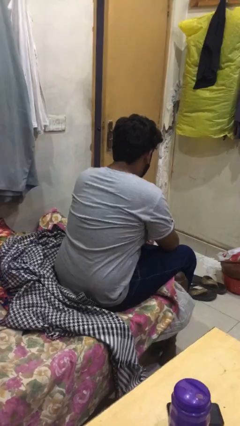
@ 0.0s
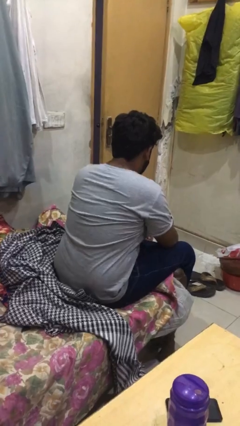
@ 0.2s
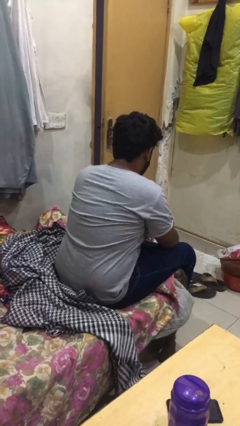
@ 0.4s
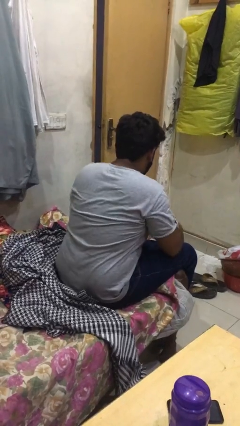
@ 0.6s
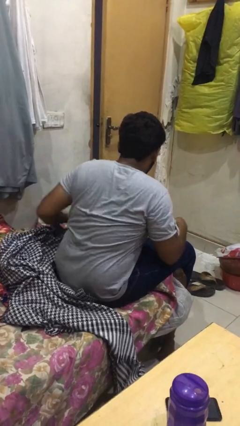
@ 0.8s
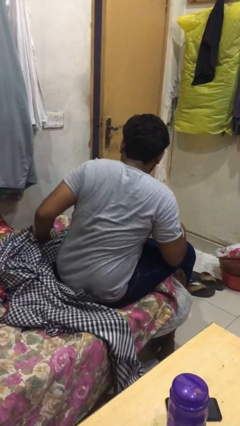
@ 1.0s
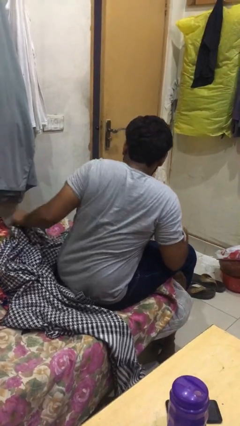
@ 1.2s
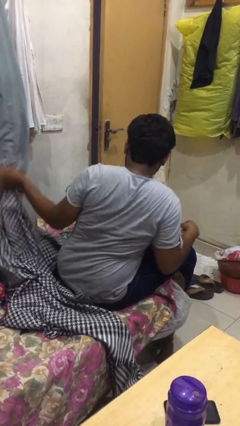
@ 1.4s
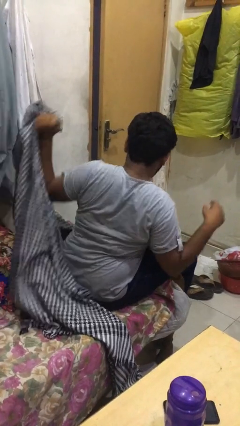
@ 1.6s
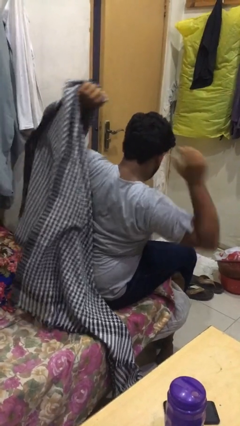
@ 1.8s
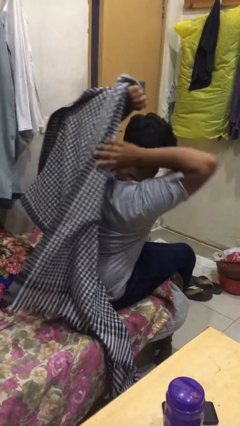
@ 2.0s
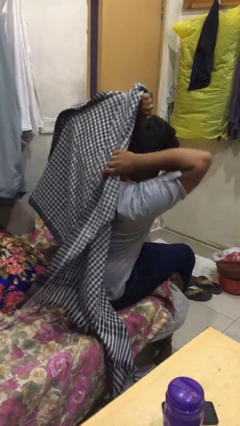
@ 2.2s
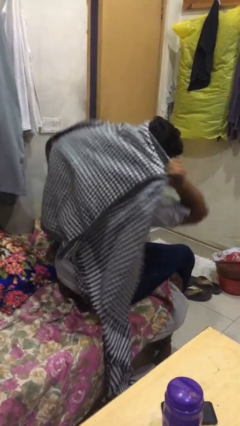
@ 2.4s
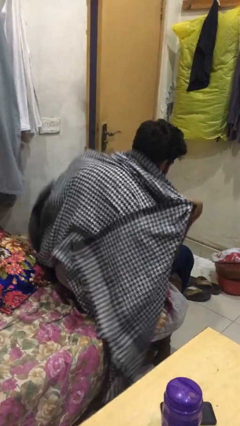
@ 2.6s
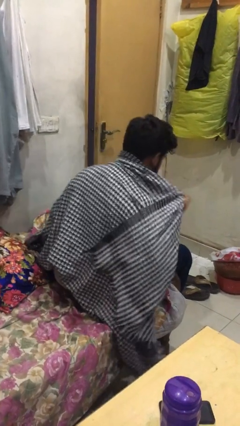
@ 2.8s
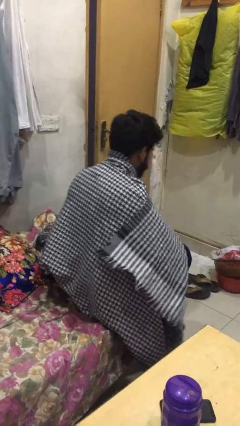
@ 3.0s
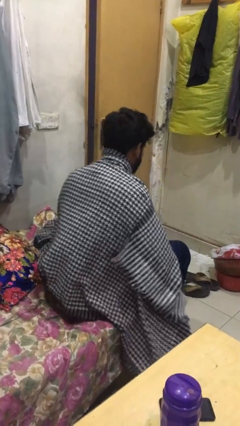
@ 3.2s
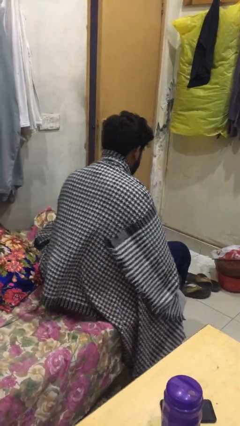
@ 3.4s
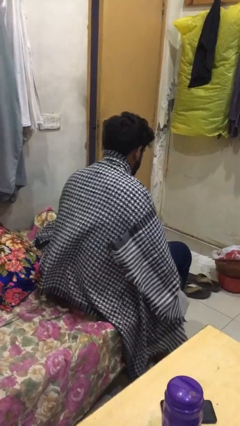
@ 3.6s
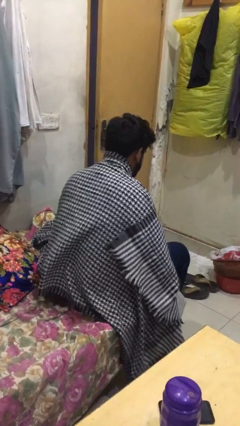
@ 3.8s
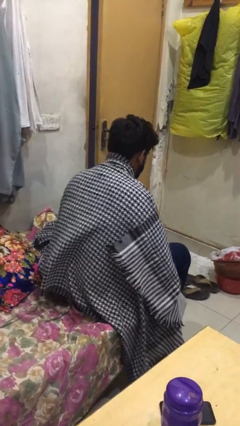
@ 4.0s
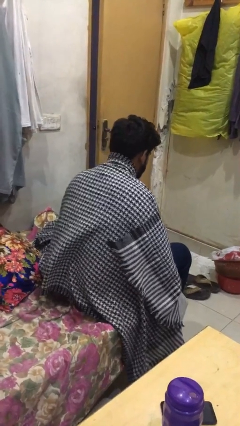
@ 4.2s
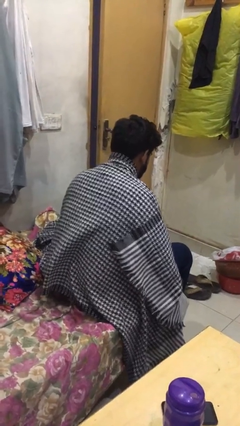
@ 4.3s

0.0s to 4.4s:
person covers with blanket

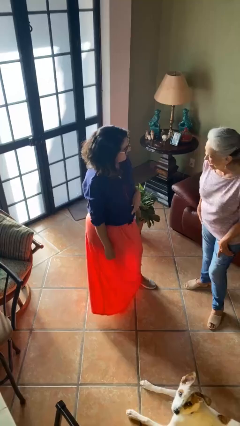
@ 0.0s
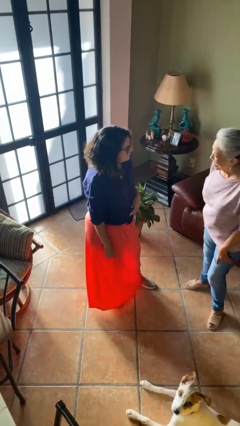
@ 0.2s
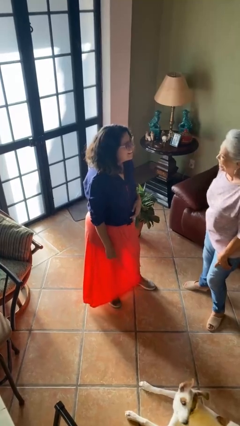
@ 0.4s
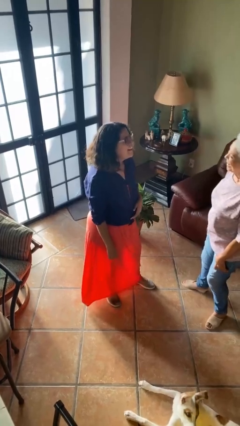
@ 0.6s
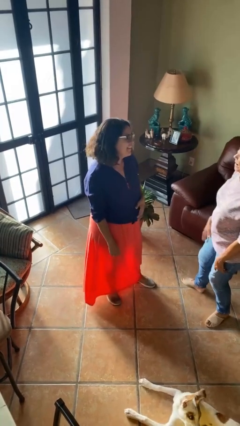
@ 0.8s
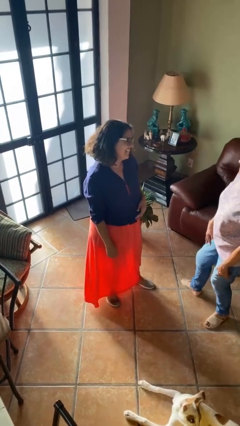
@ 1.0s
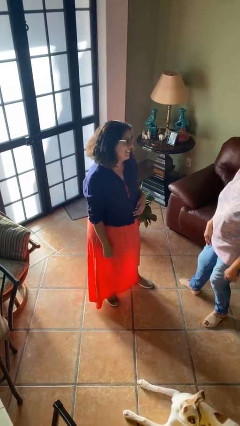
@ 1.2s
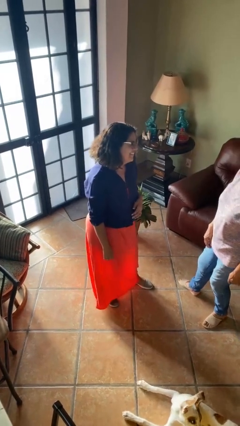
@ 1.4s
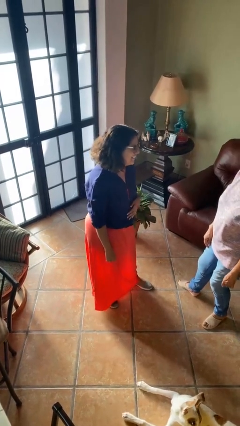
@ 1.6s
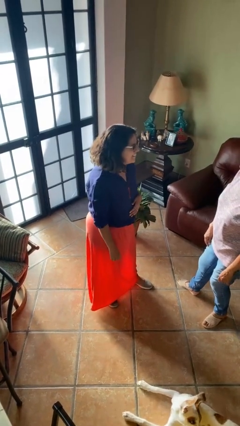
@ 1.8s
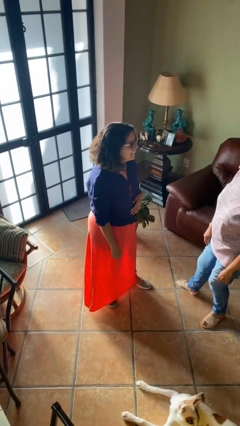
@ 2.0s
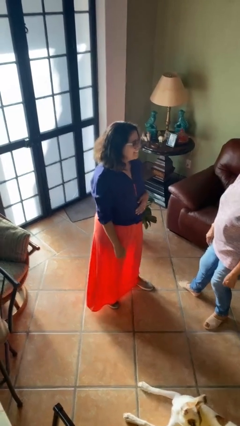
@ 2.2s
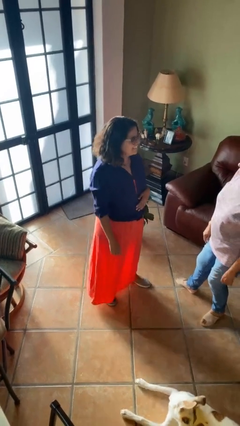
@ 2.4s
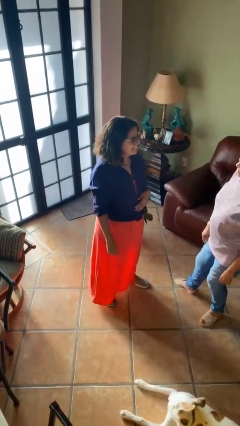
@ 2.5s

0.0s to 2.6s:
person laughs with person

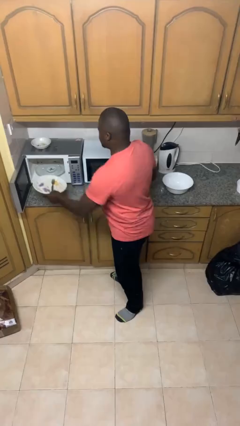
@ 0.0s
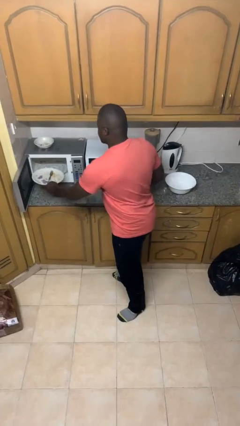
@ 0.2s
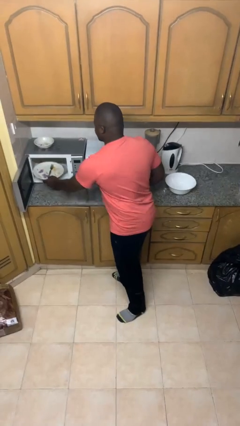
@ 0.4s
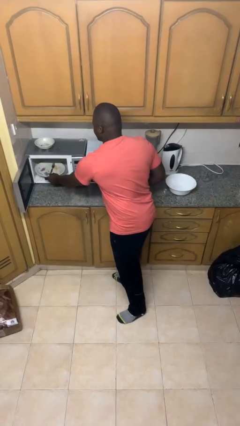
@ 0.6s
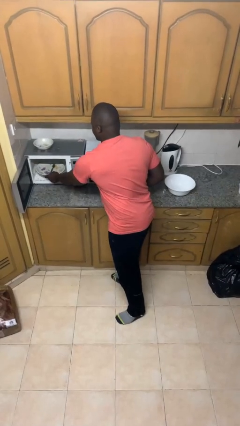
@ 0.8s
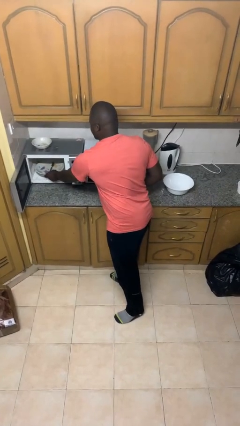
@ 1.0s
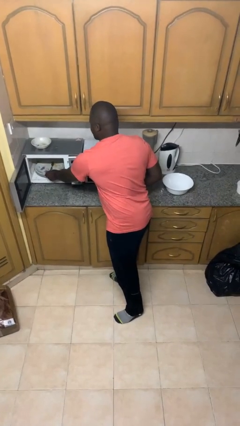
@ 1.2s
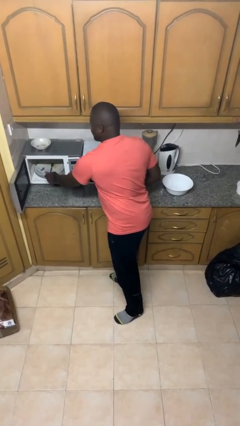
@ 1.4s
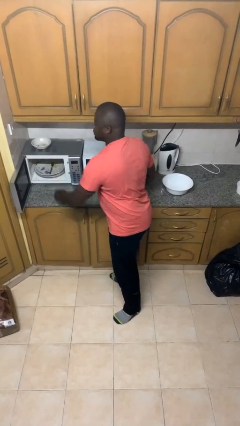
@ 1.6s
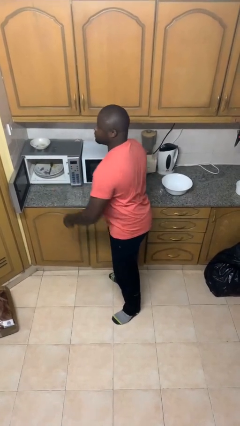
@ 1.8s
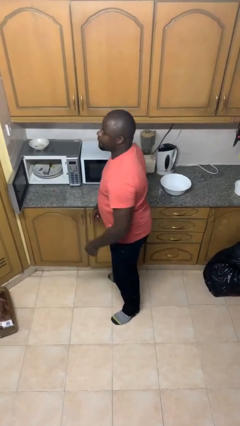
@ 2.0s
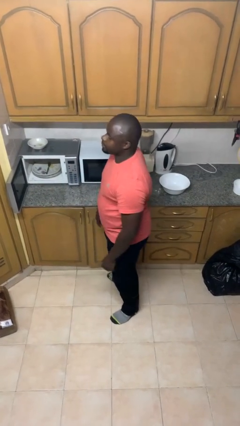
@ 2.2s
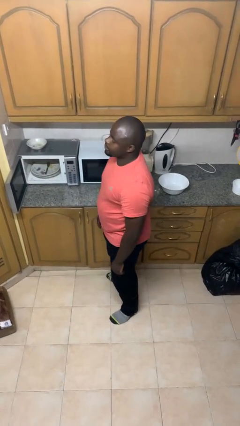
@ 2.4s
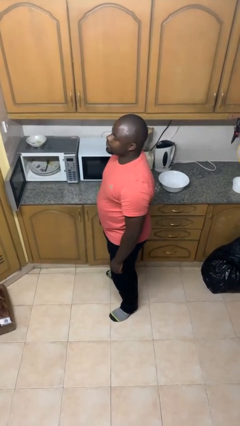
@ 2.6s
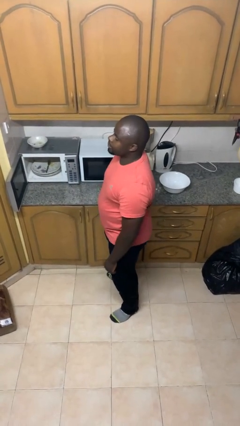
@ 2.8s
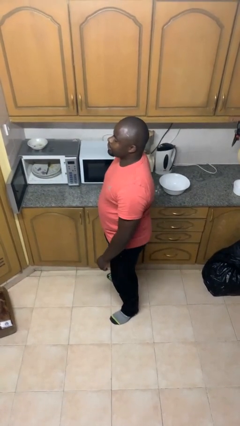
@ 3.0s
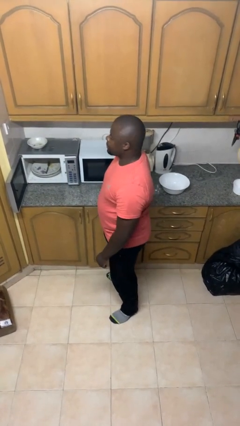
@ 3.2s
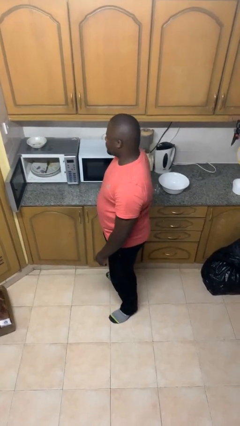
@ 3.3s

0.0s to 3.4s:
person puts object into microwave

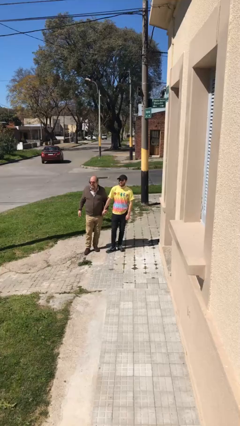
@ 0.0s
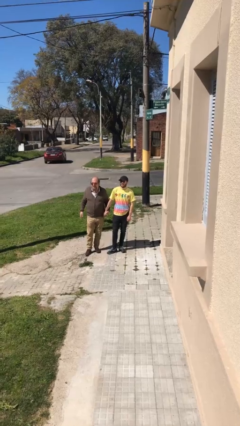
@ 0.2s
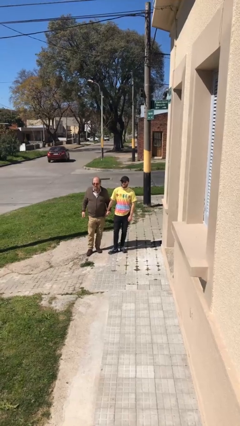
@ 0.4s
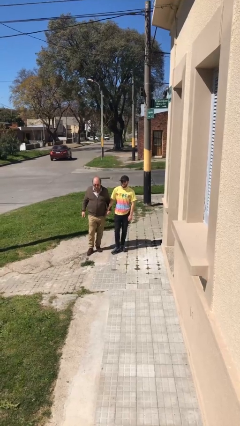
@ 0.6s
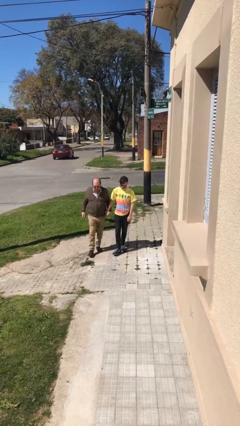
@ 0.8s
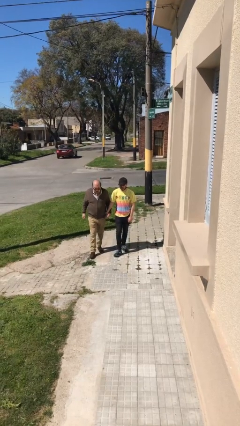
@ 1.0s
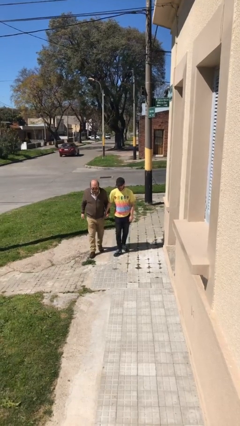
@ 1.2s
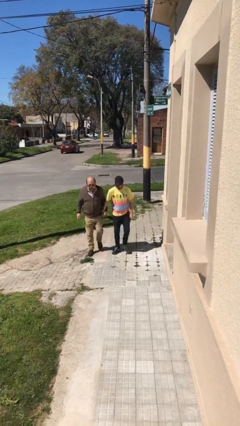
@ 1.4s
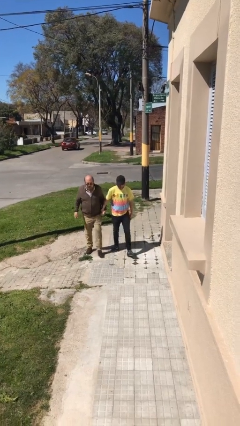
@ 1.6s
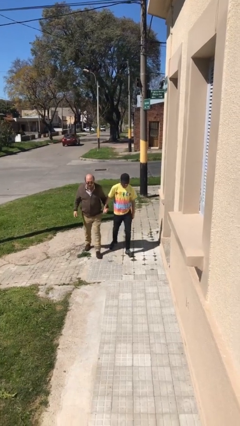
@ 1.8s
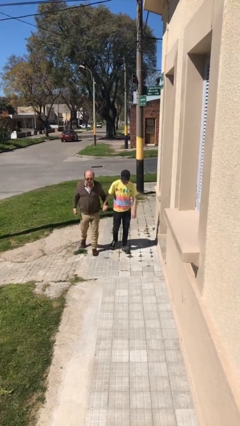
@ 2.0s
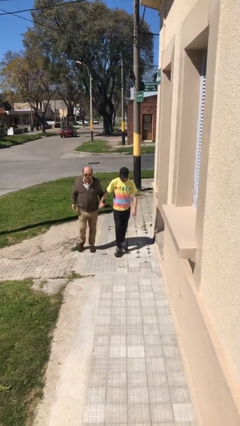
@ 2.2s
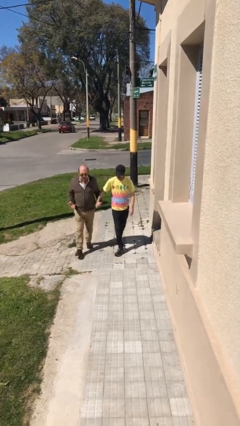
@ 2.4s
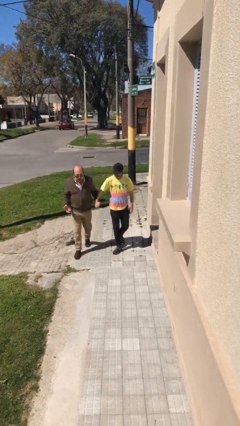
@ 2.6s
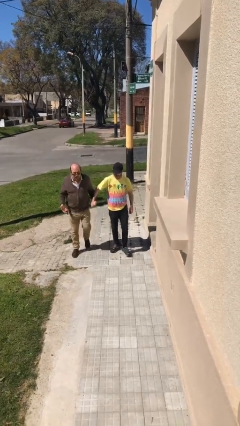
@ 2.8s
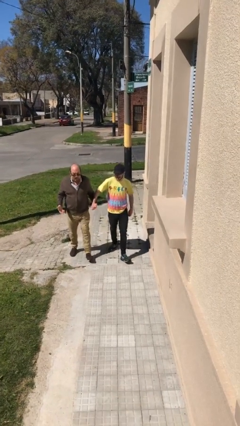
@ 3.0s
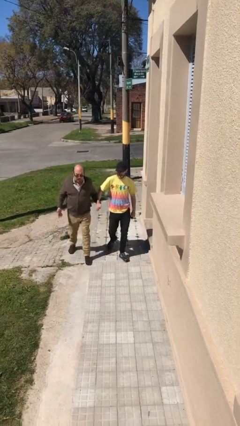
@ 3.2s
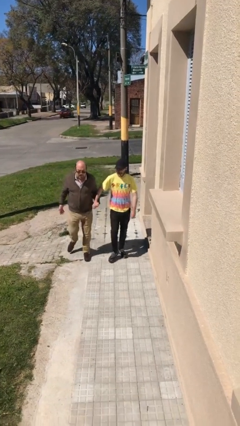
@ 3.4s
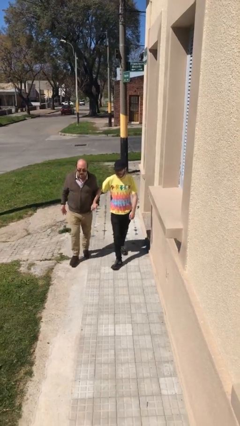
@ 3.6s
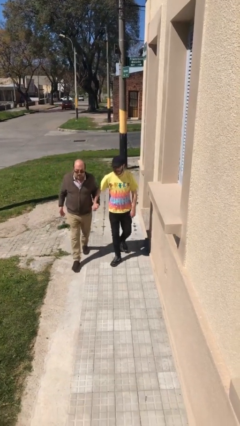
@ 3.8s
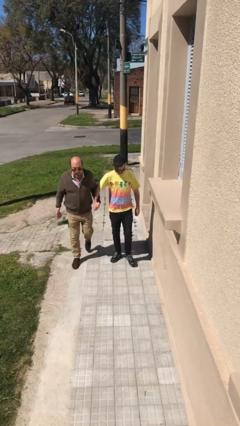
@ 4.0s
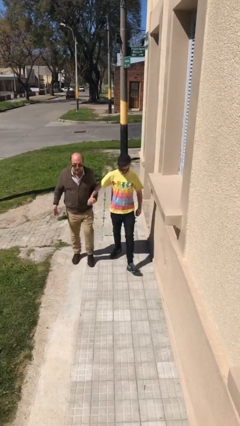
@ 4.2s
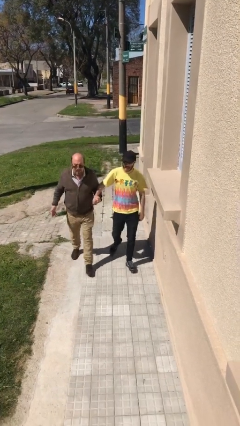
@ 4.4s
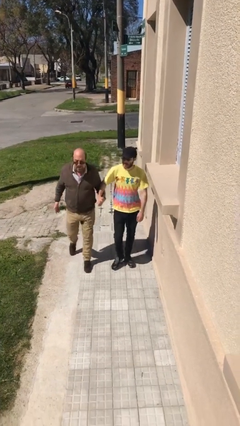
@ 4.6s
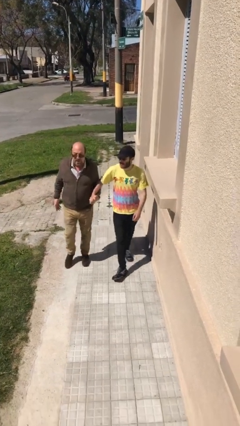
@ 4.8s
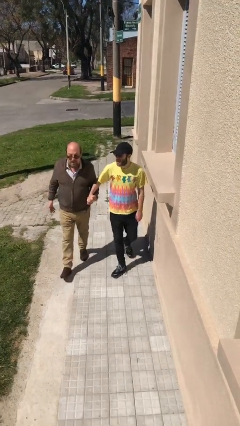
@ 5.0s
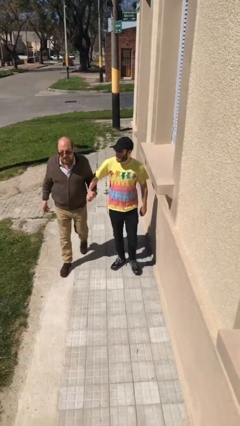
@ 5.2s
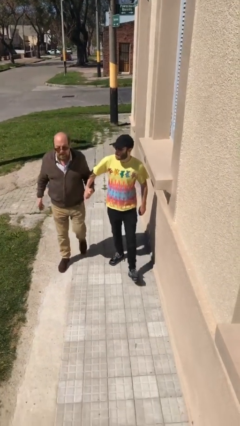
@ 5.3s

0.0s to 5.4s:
person holds hand

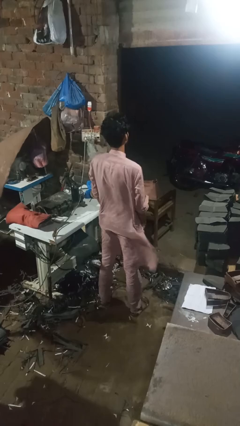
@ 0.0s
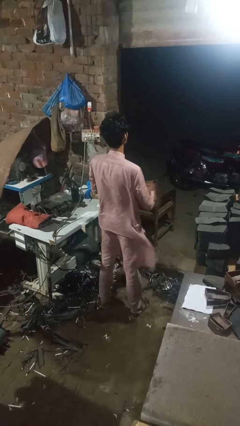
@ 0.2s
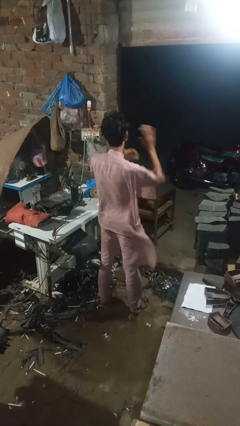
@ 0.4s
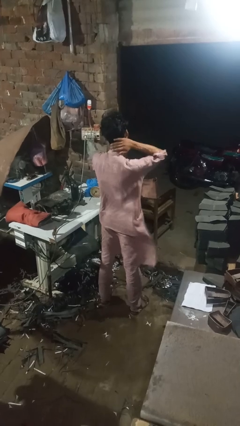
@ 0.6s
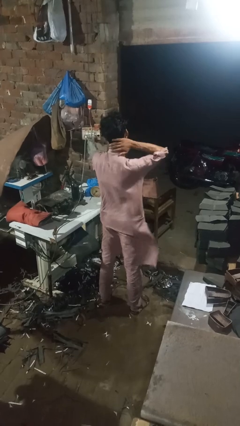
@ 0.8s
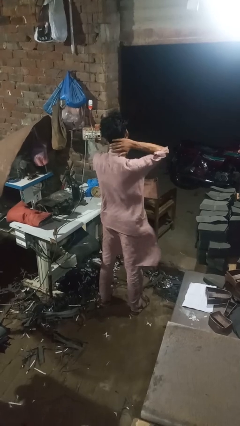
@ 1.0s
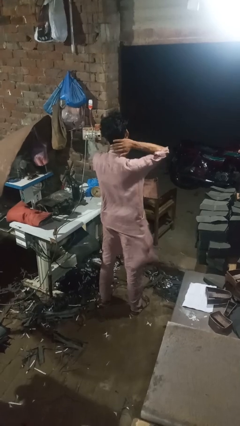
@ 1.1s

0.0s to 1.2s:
person rubs neck

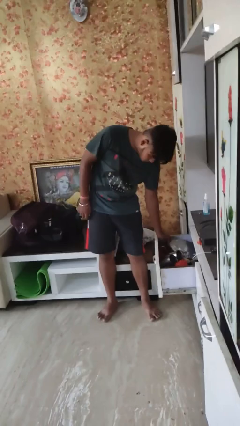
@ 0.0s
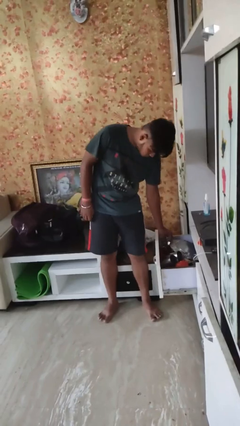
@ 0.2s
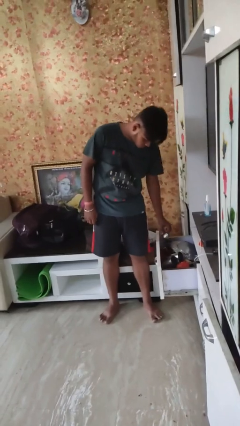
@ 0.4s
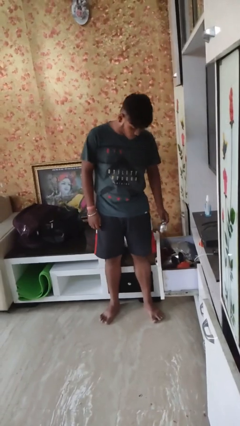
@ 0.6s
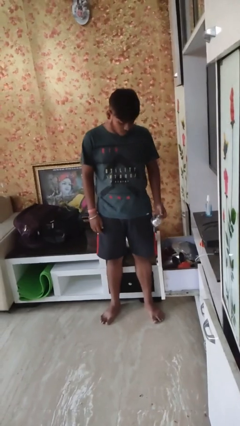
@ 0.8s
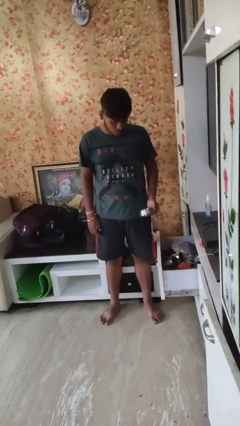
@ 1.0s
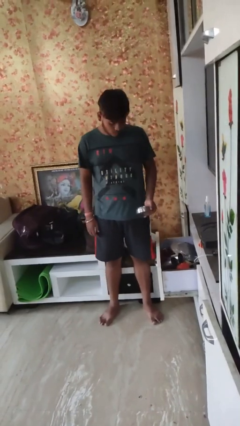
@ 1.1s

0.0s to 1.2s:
person takes object from kitchen drawer
